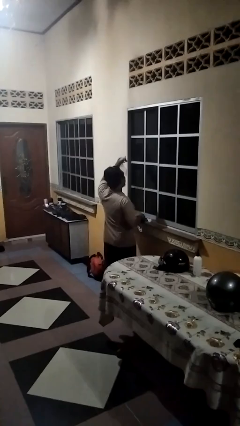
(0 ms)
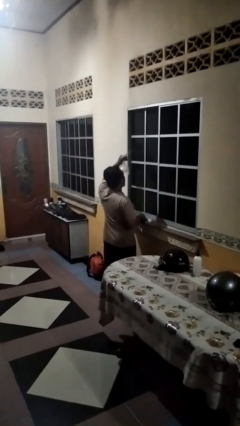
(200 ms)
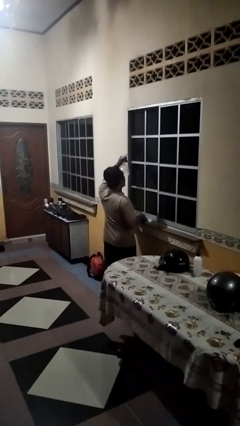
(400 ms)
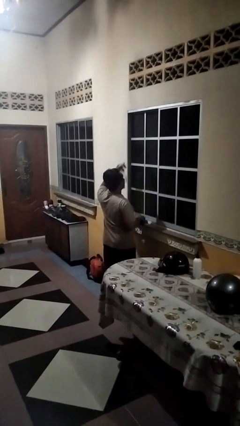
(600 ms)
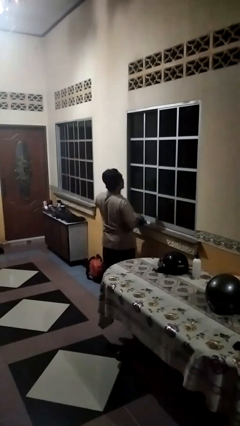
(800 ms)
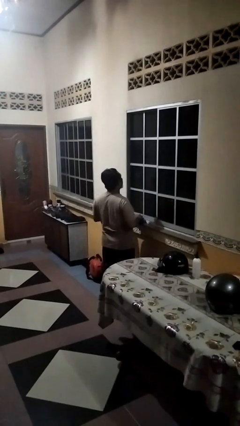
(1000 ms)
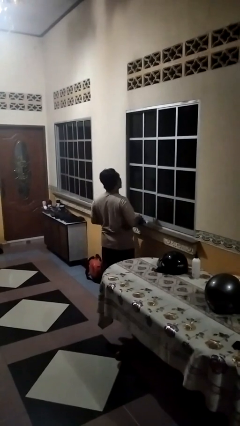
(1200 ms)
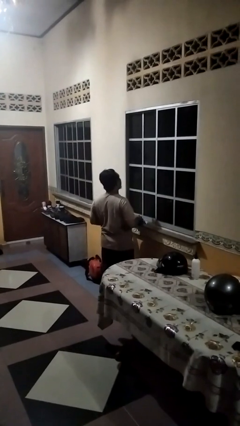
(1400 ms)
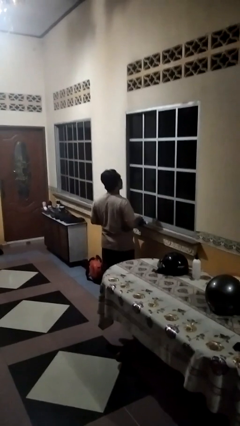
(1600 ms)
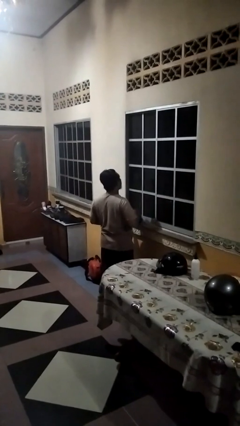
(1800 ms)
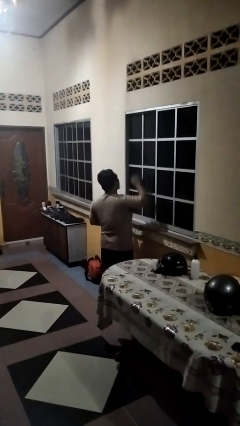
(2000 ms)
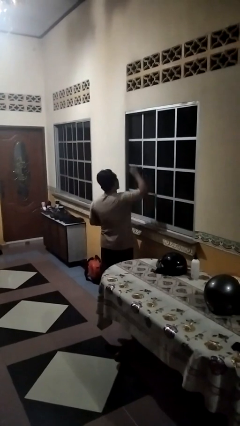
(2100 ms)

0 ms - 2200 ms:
person sprays from bottle

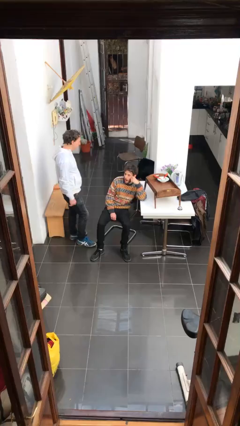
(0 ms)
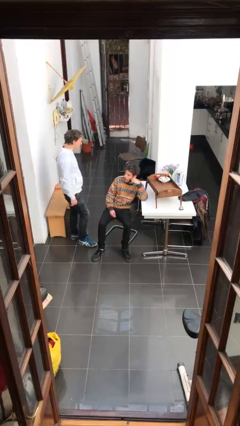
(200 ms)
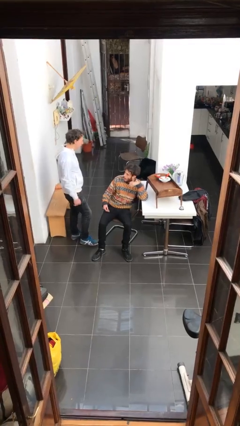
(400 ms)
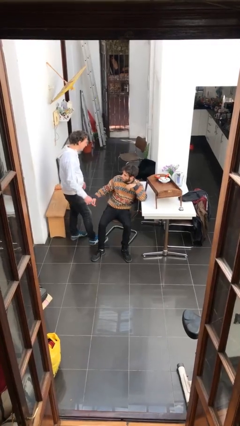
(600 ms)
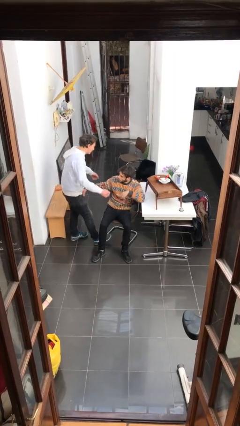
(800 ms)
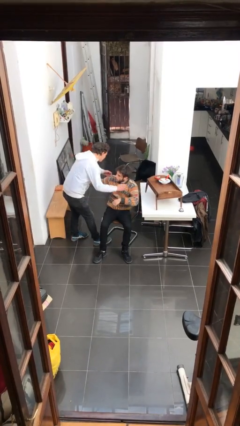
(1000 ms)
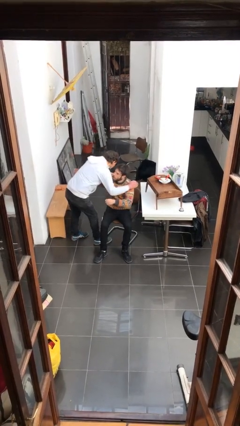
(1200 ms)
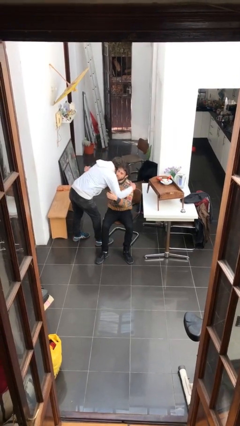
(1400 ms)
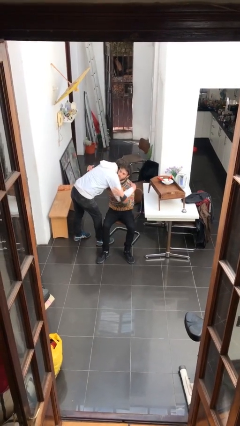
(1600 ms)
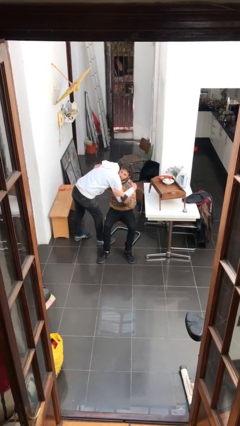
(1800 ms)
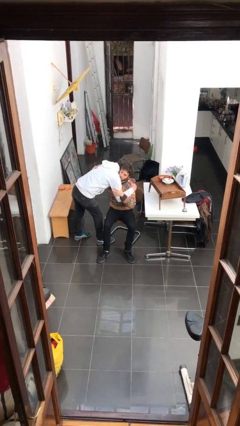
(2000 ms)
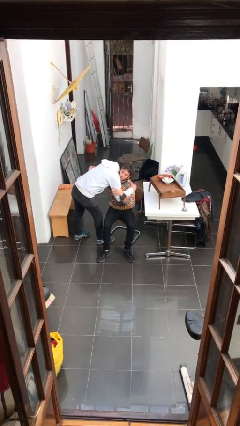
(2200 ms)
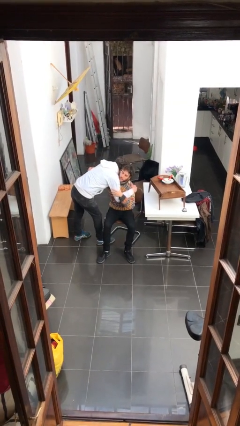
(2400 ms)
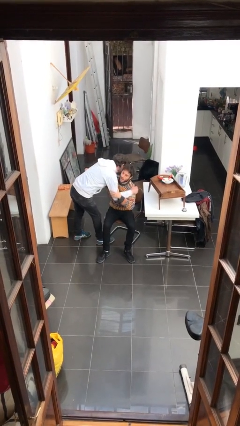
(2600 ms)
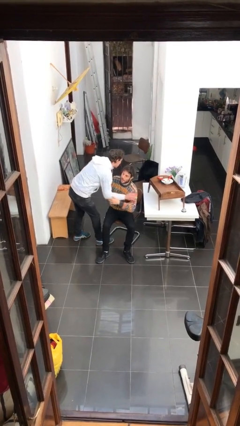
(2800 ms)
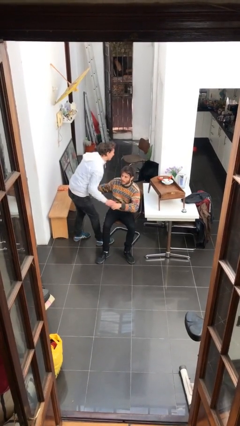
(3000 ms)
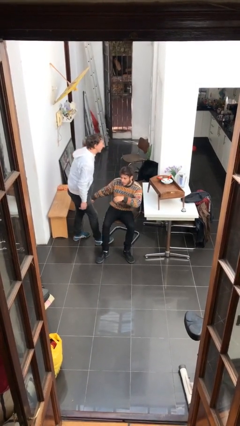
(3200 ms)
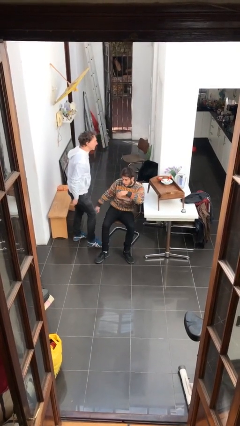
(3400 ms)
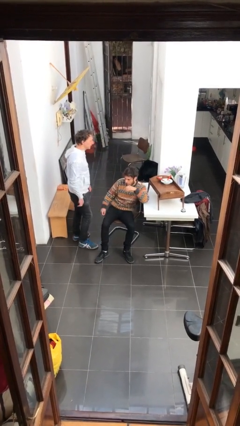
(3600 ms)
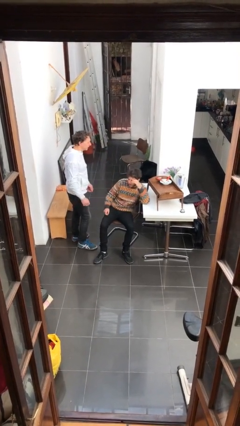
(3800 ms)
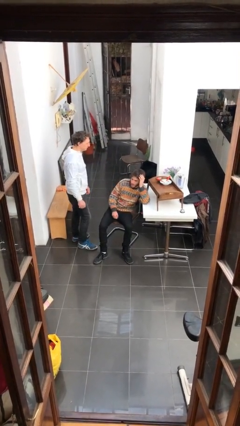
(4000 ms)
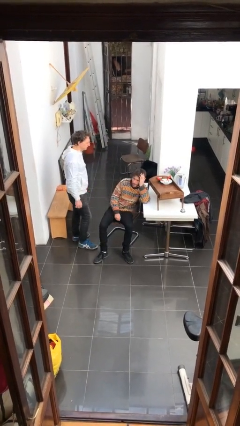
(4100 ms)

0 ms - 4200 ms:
person embraces person

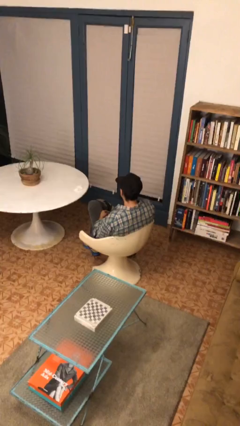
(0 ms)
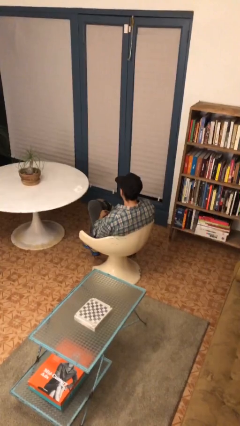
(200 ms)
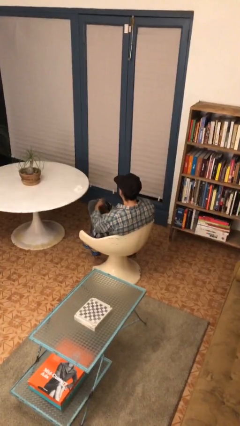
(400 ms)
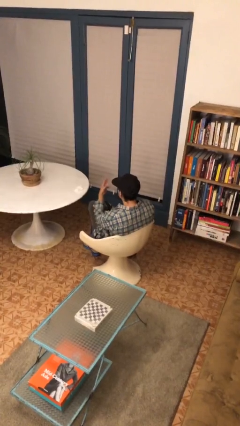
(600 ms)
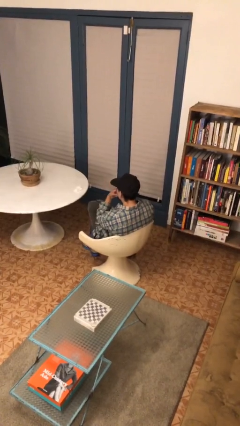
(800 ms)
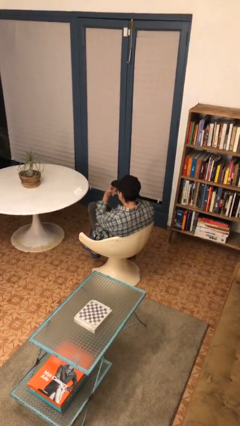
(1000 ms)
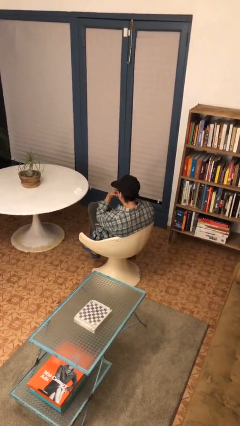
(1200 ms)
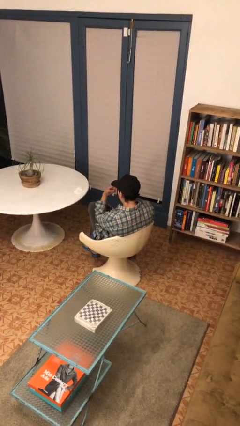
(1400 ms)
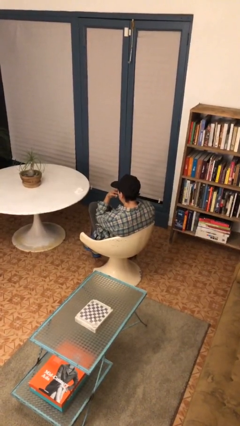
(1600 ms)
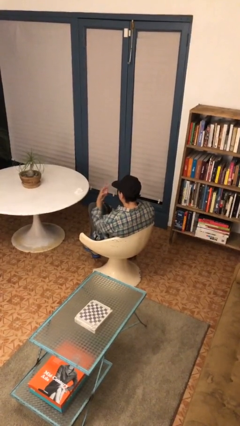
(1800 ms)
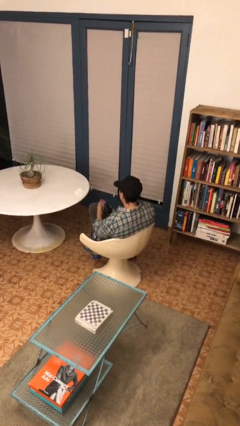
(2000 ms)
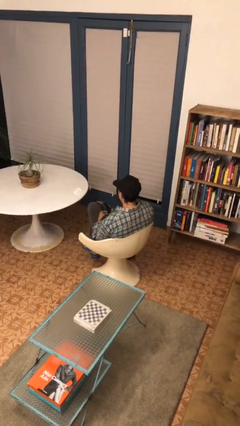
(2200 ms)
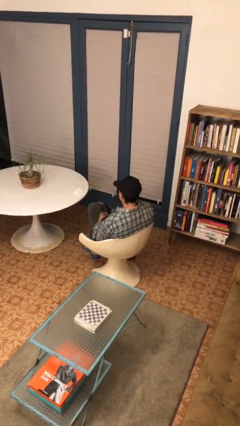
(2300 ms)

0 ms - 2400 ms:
person gestures watch closely

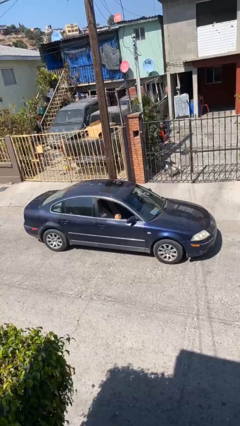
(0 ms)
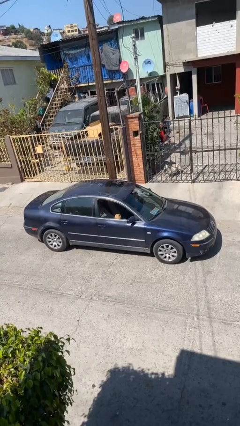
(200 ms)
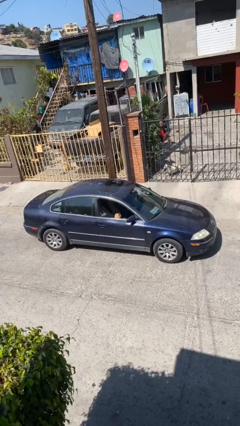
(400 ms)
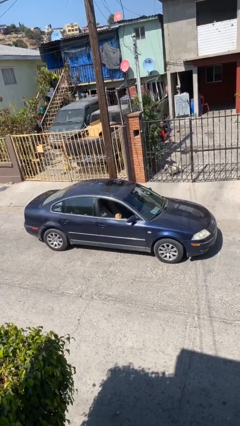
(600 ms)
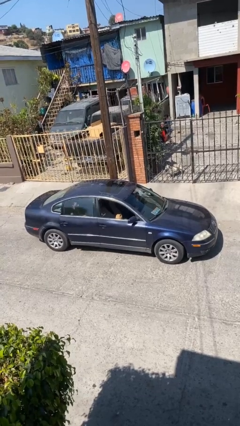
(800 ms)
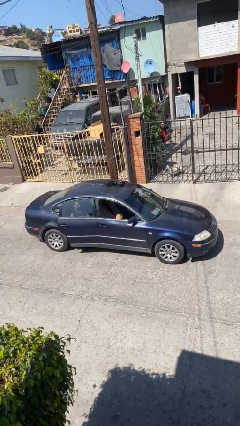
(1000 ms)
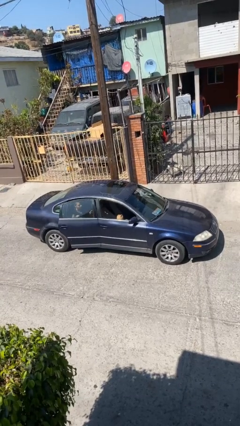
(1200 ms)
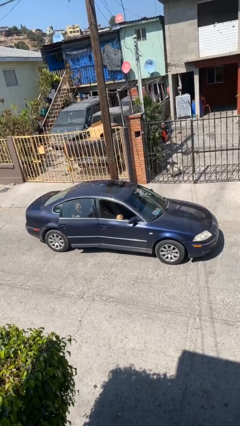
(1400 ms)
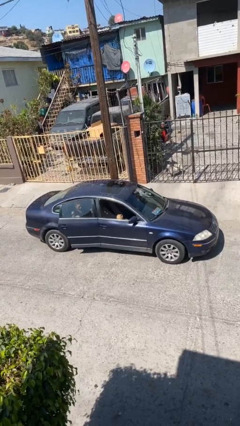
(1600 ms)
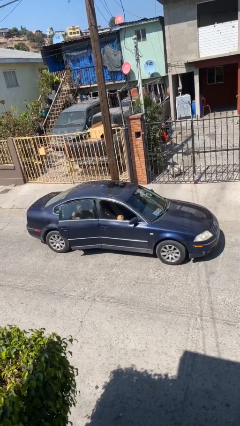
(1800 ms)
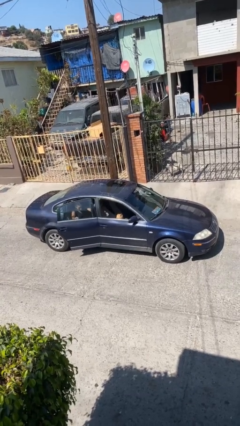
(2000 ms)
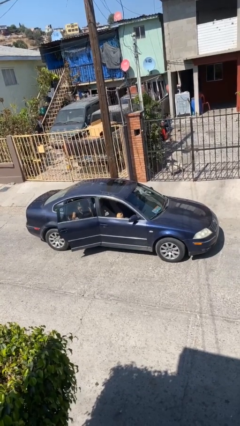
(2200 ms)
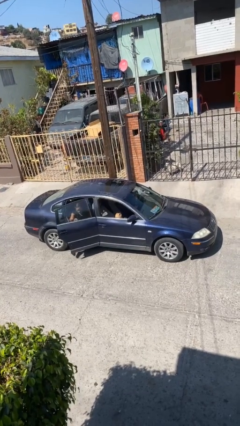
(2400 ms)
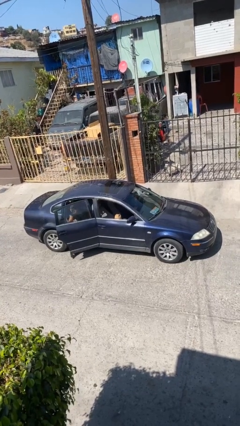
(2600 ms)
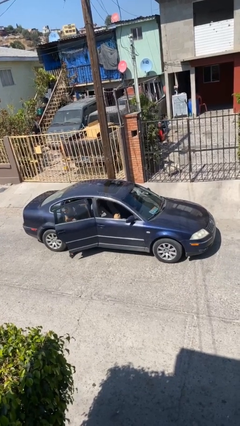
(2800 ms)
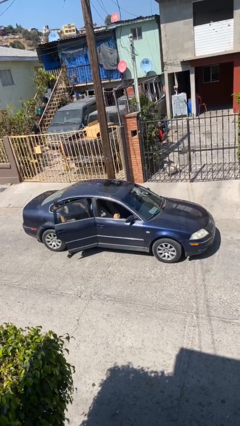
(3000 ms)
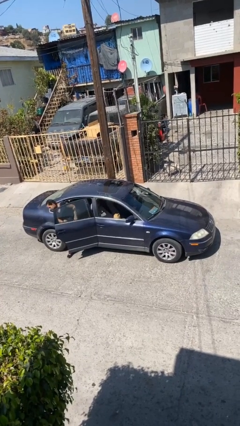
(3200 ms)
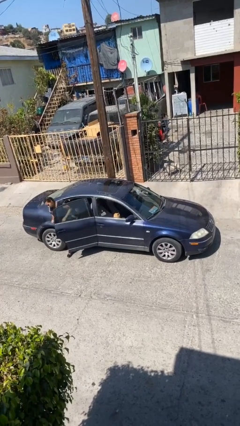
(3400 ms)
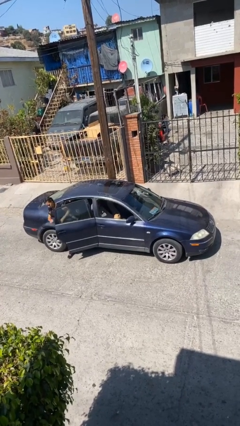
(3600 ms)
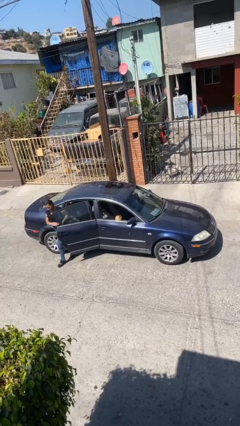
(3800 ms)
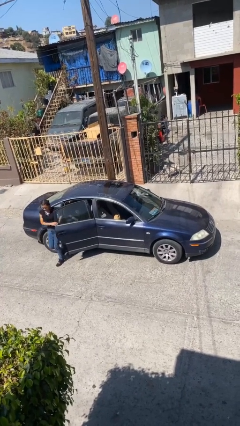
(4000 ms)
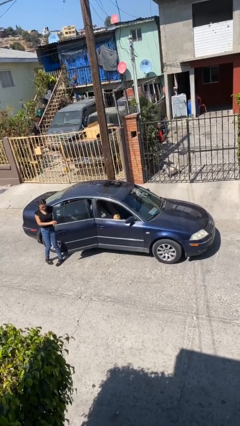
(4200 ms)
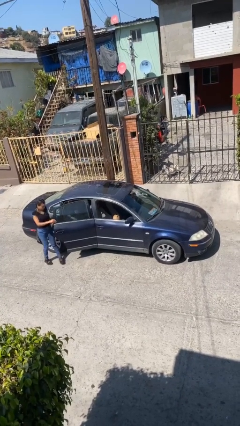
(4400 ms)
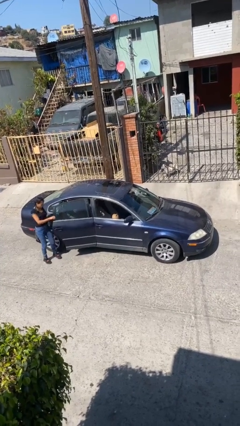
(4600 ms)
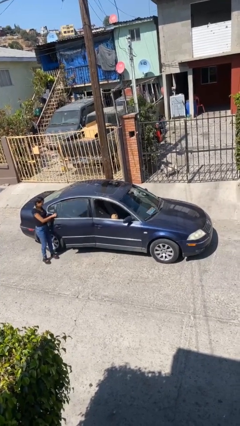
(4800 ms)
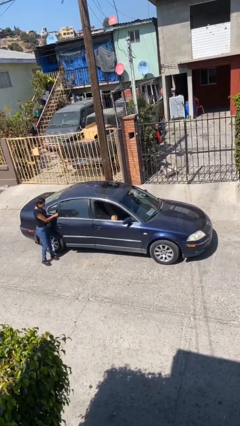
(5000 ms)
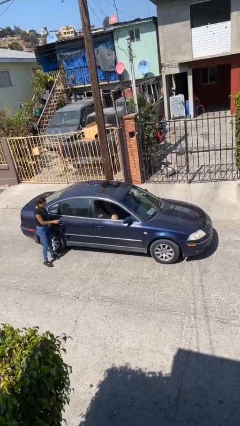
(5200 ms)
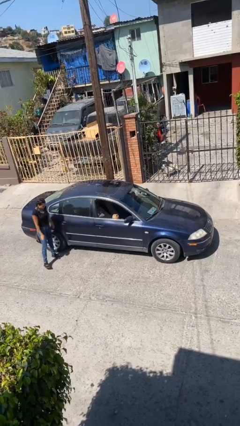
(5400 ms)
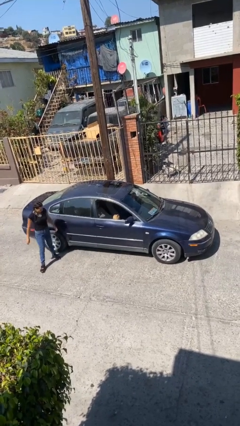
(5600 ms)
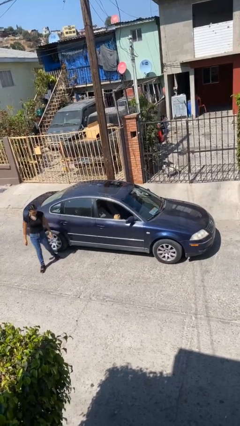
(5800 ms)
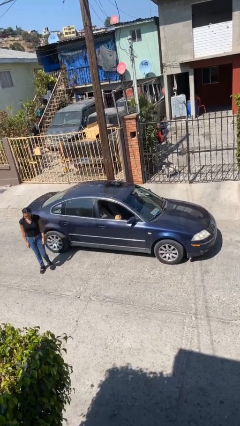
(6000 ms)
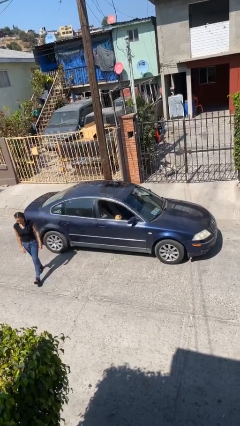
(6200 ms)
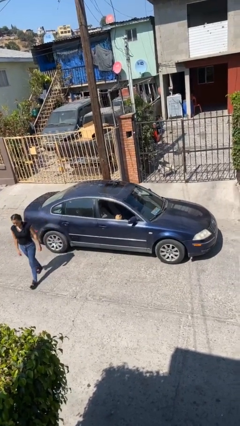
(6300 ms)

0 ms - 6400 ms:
car drops off person

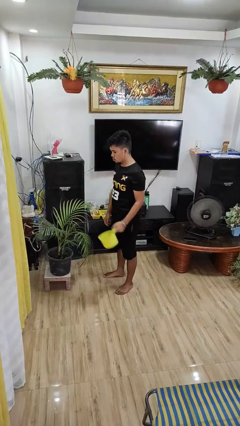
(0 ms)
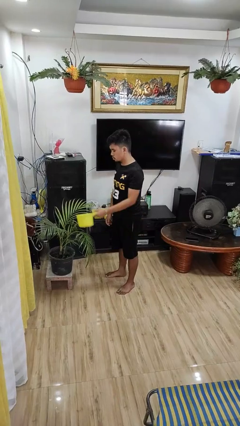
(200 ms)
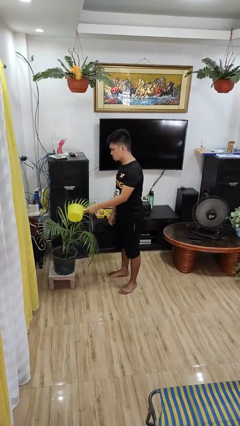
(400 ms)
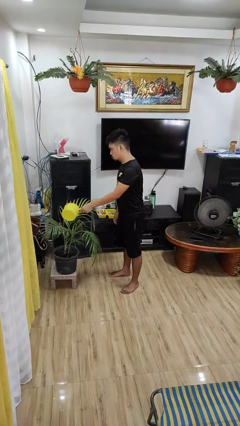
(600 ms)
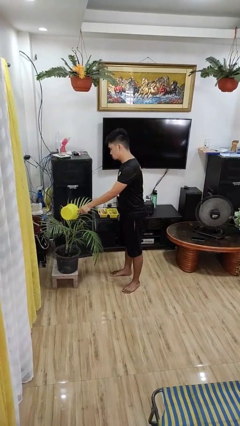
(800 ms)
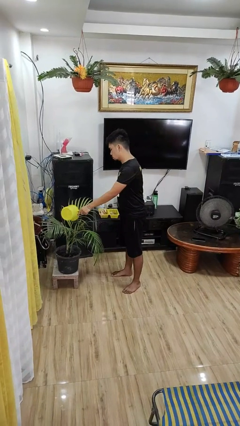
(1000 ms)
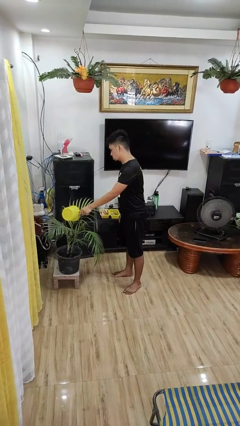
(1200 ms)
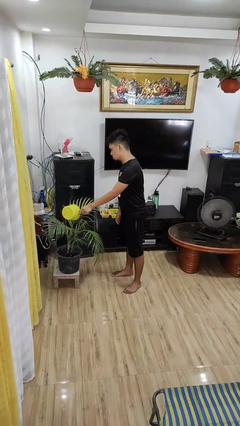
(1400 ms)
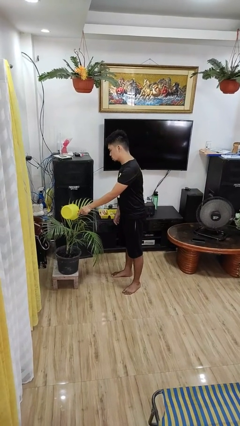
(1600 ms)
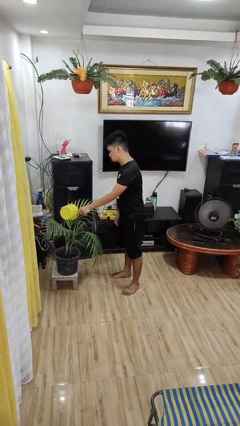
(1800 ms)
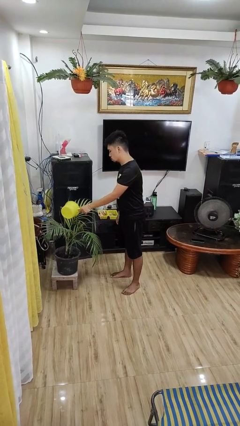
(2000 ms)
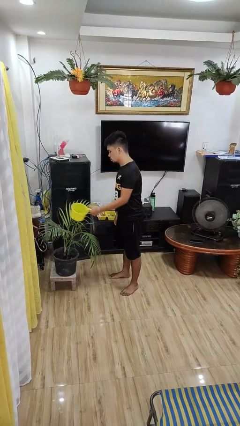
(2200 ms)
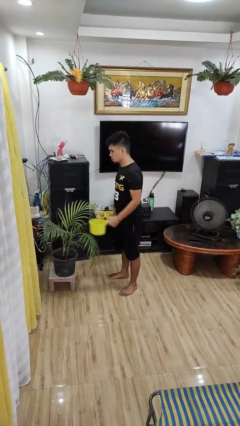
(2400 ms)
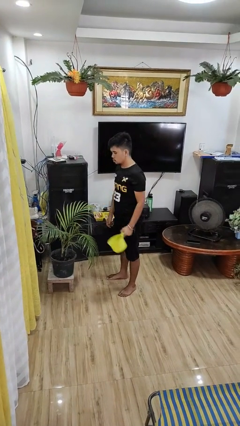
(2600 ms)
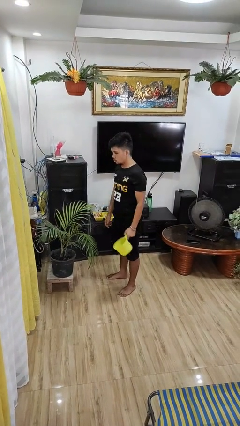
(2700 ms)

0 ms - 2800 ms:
person waters houseplant
